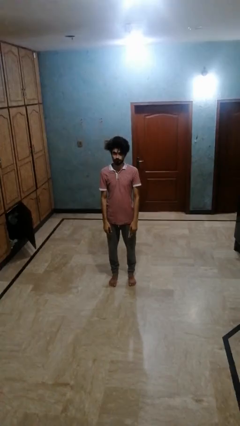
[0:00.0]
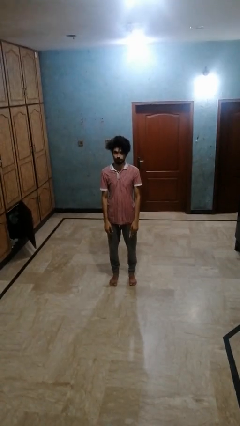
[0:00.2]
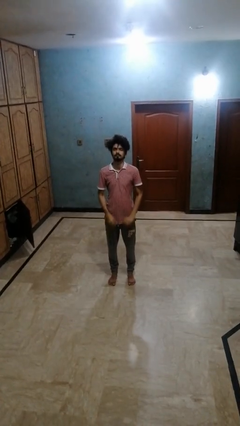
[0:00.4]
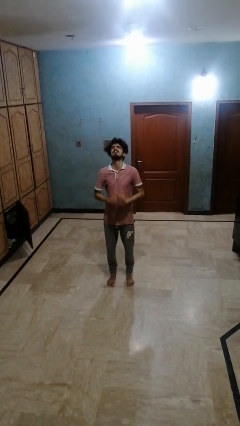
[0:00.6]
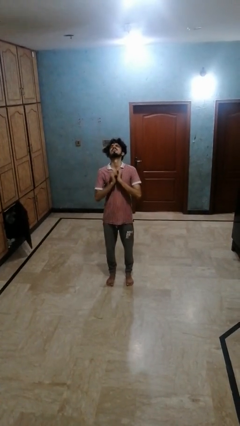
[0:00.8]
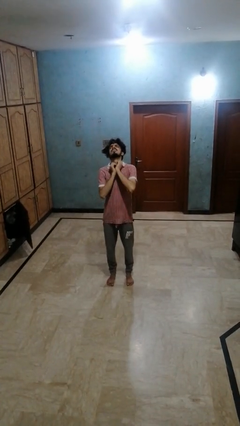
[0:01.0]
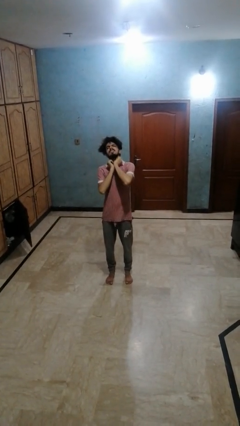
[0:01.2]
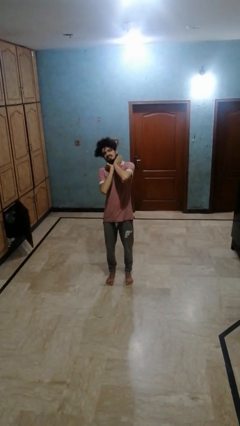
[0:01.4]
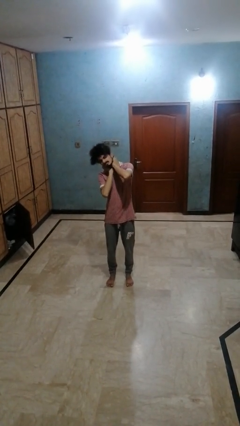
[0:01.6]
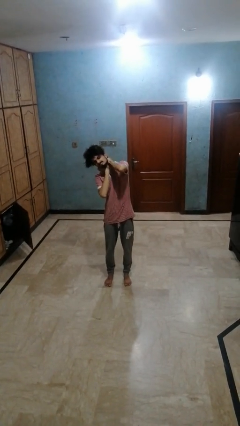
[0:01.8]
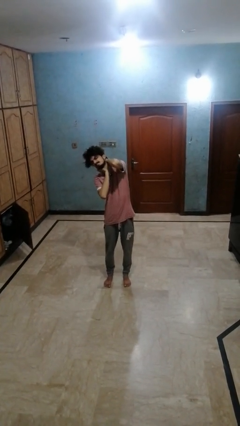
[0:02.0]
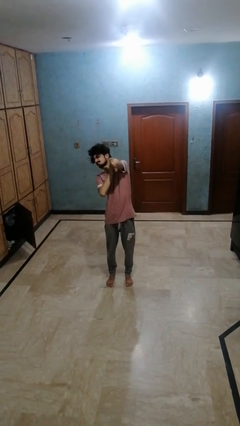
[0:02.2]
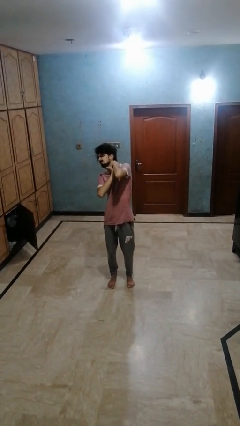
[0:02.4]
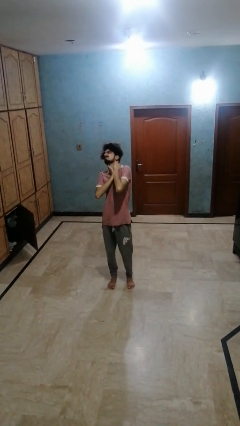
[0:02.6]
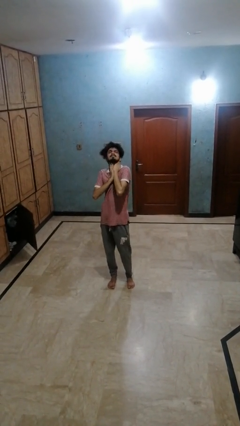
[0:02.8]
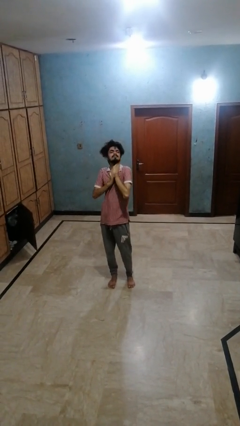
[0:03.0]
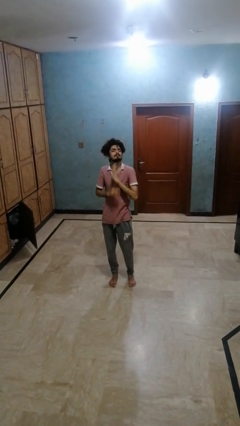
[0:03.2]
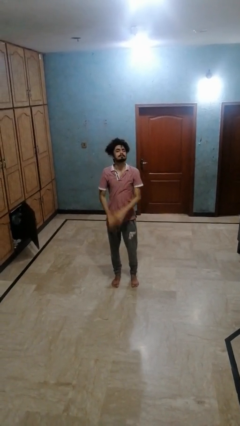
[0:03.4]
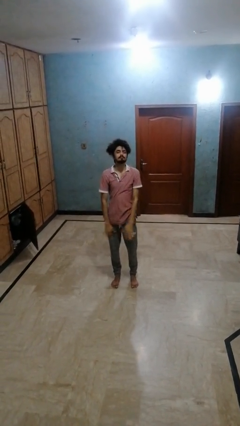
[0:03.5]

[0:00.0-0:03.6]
person rubs neck

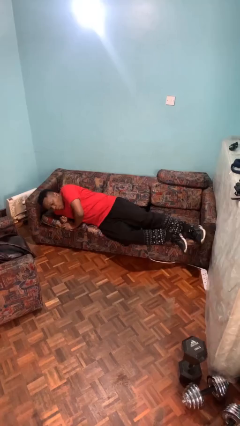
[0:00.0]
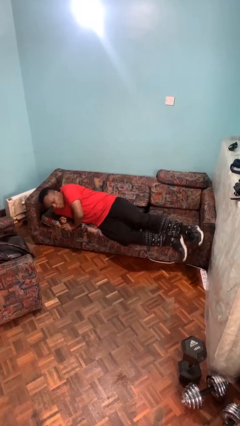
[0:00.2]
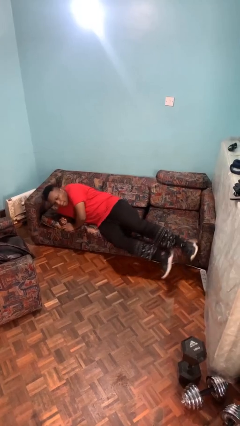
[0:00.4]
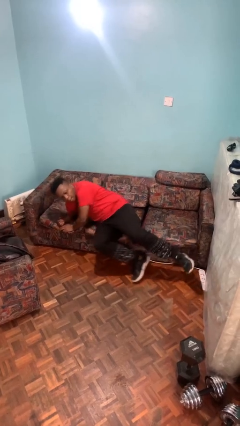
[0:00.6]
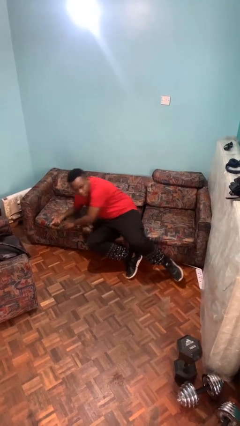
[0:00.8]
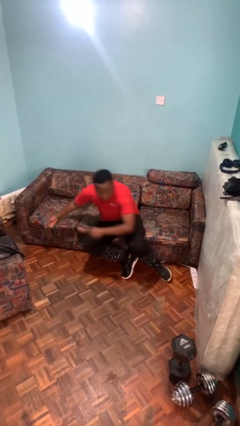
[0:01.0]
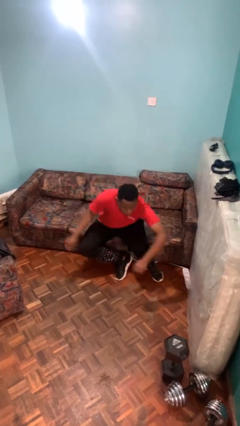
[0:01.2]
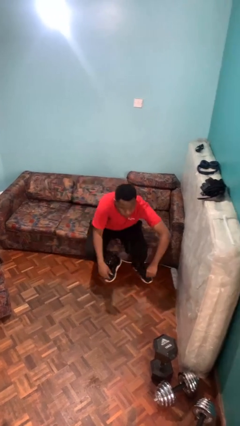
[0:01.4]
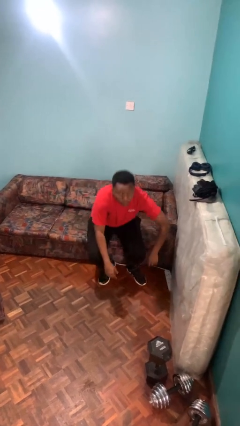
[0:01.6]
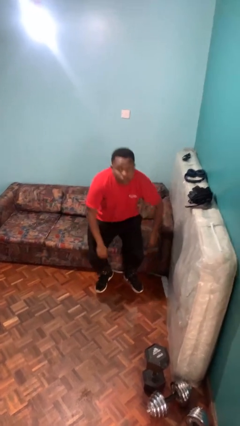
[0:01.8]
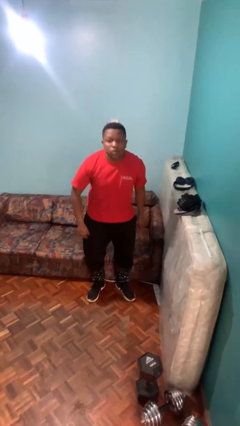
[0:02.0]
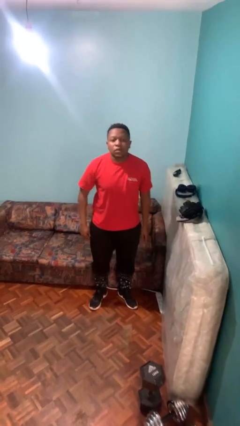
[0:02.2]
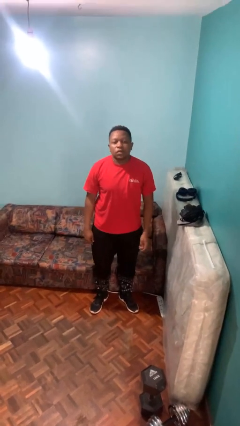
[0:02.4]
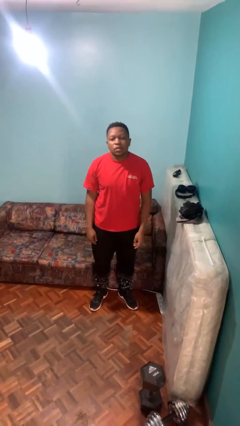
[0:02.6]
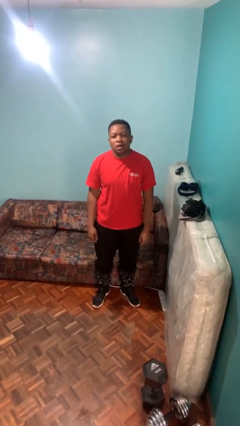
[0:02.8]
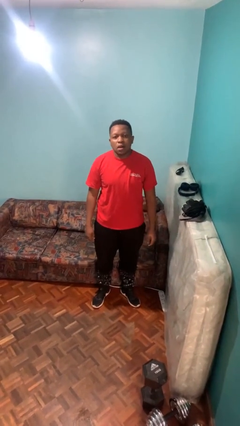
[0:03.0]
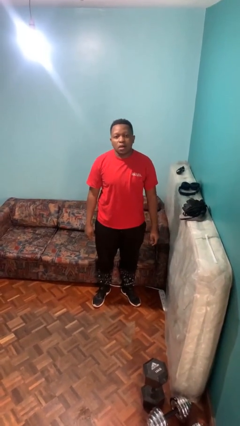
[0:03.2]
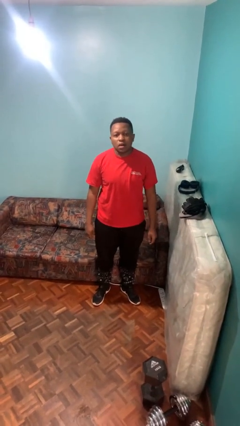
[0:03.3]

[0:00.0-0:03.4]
person stands up

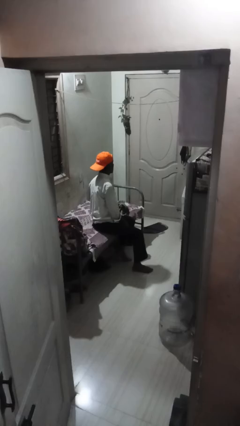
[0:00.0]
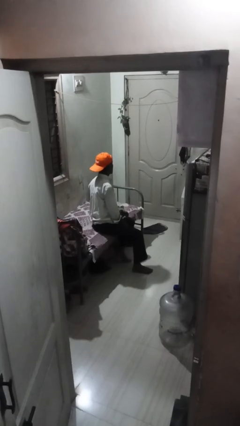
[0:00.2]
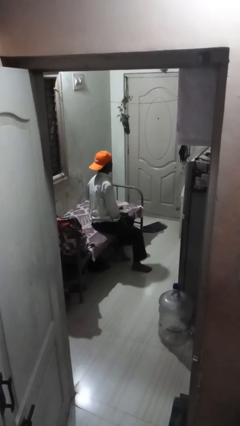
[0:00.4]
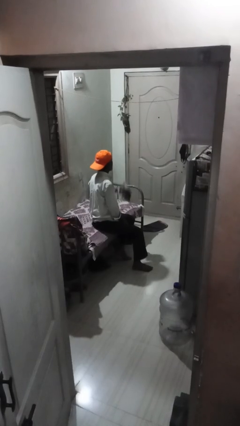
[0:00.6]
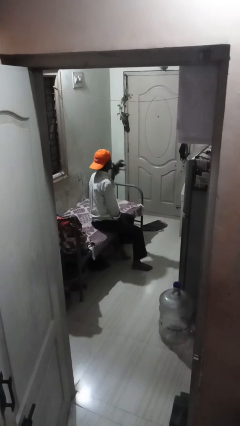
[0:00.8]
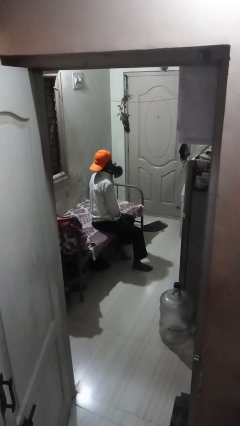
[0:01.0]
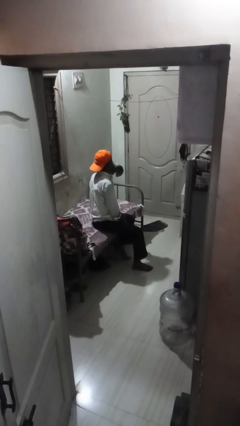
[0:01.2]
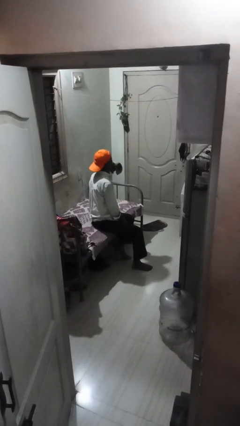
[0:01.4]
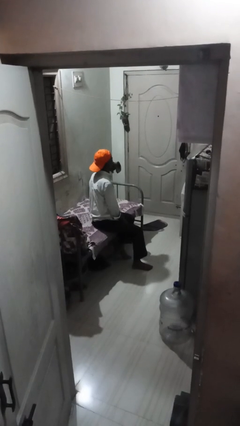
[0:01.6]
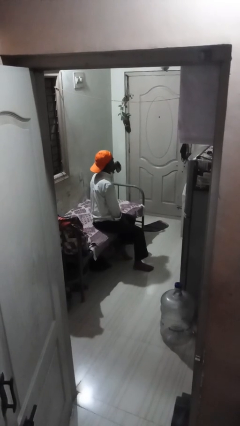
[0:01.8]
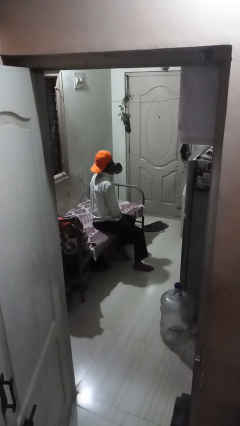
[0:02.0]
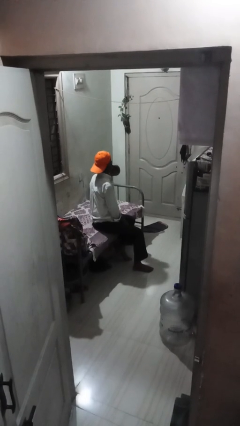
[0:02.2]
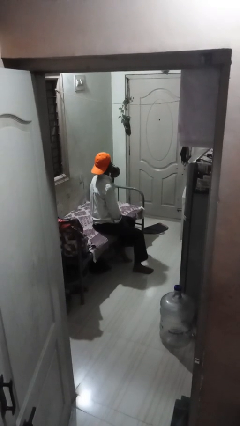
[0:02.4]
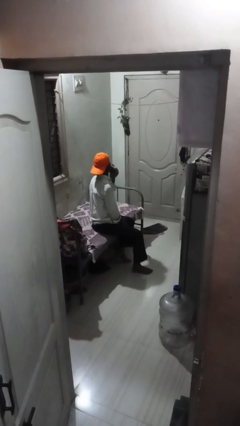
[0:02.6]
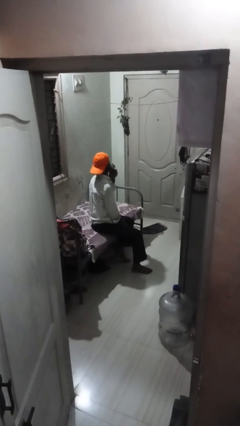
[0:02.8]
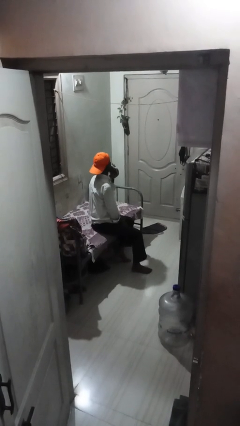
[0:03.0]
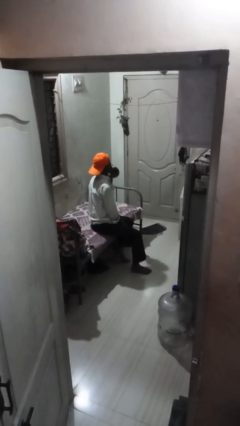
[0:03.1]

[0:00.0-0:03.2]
person wipes mouth with napkin

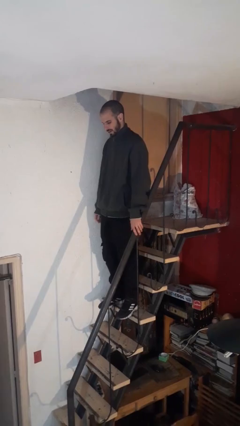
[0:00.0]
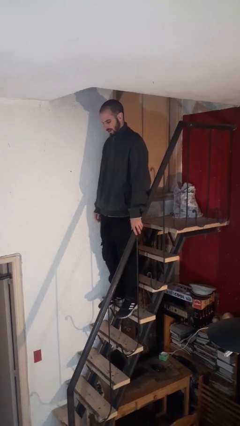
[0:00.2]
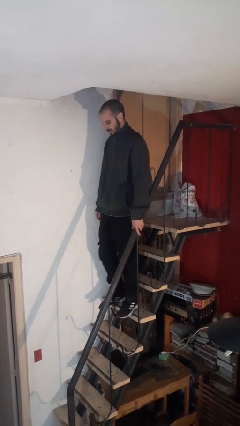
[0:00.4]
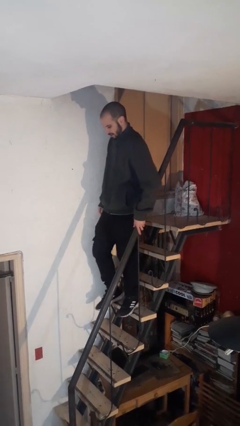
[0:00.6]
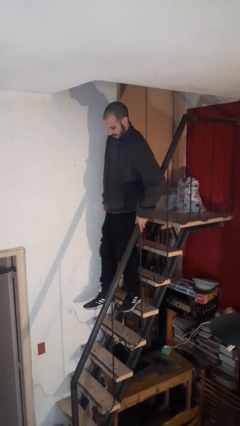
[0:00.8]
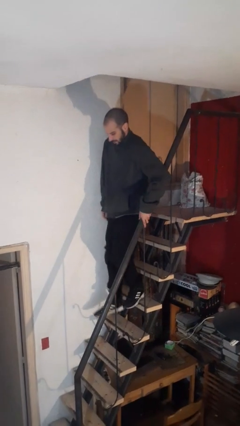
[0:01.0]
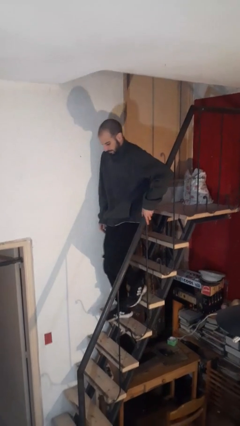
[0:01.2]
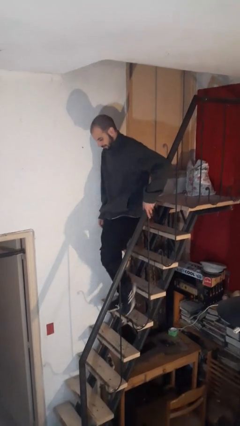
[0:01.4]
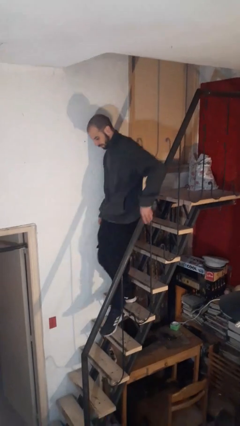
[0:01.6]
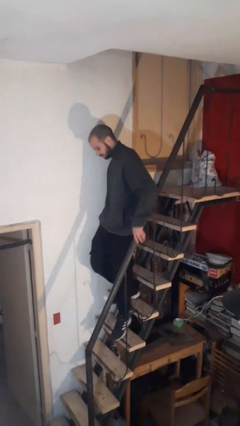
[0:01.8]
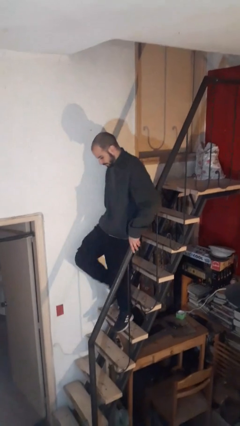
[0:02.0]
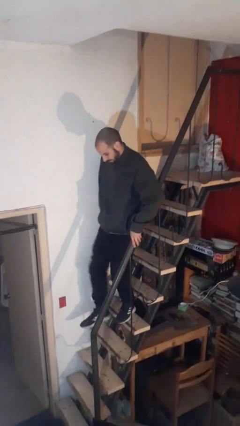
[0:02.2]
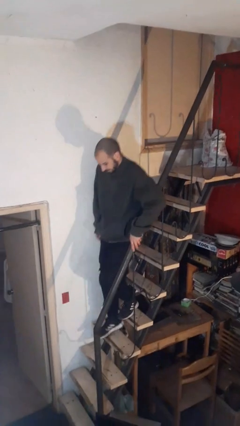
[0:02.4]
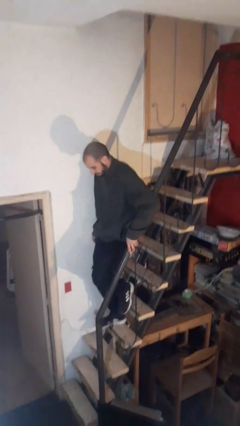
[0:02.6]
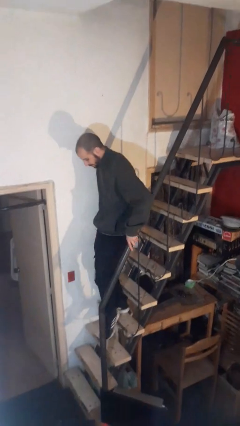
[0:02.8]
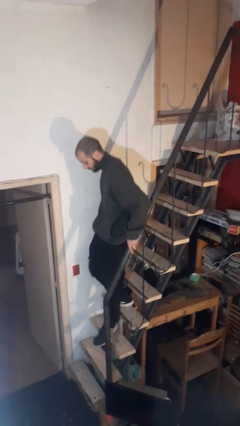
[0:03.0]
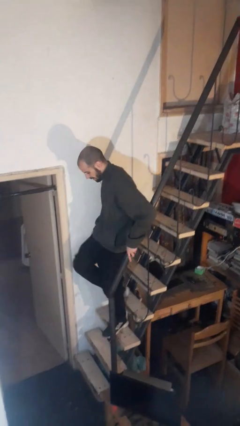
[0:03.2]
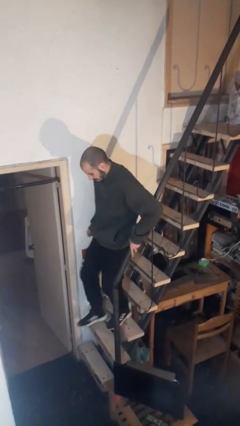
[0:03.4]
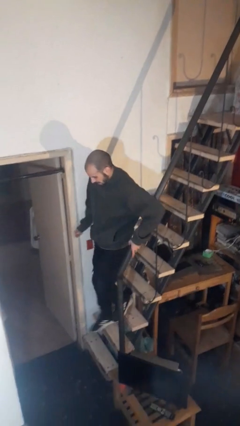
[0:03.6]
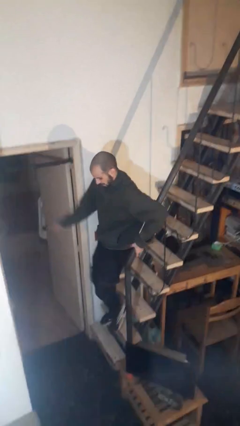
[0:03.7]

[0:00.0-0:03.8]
person climbs down stairs

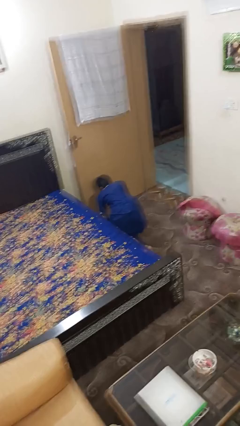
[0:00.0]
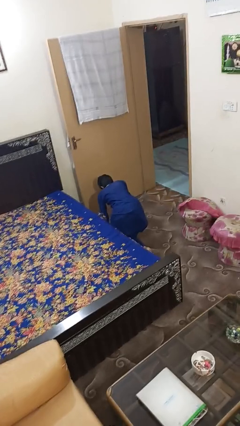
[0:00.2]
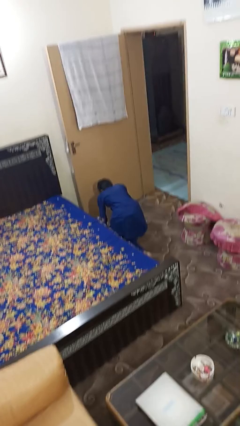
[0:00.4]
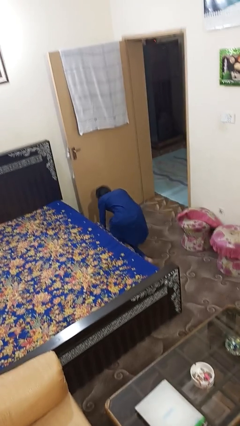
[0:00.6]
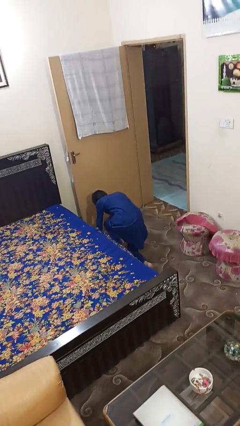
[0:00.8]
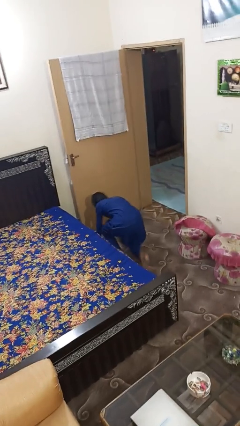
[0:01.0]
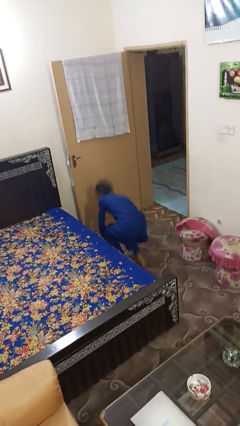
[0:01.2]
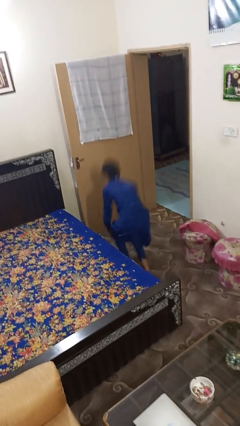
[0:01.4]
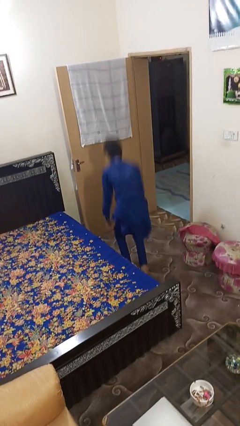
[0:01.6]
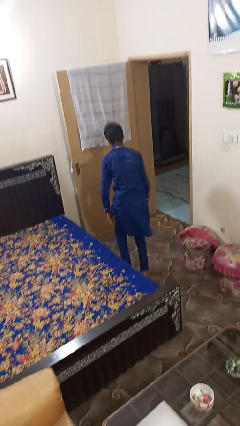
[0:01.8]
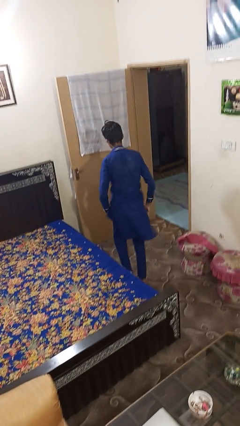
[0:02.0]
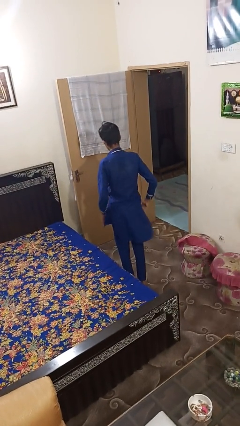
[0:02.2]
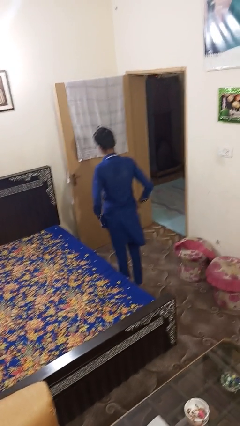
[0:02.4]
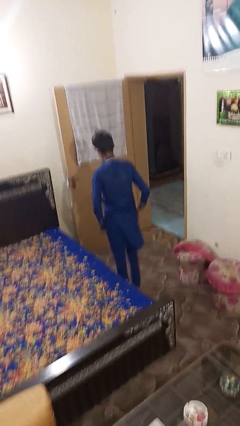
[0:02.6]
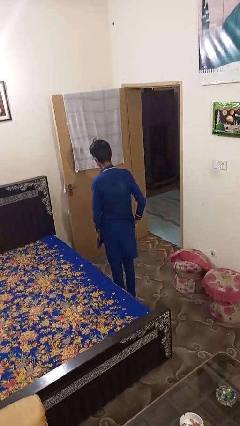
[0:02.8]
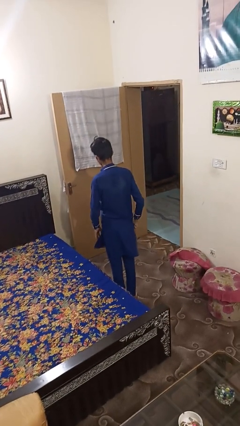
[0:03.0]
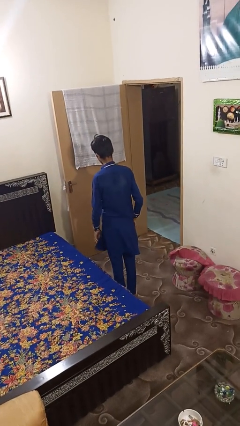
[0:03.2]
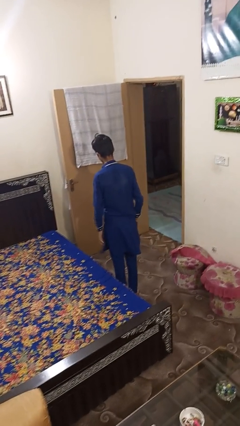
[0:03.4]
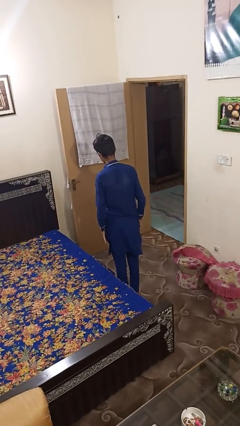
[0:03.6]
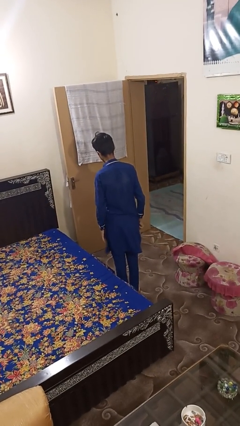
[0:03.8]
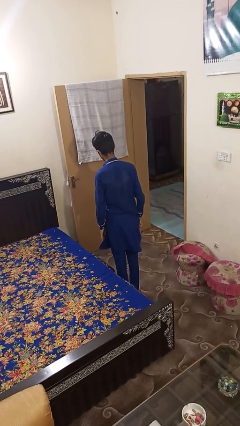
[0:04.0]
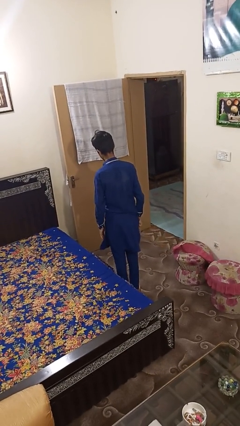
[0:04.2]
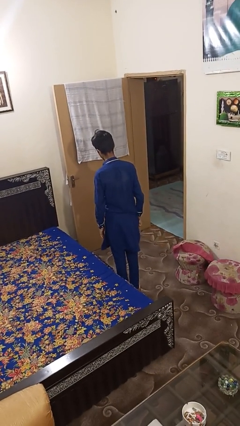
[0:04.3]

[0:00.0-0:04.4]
person stands up from floor
